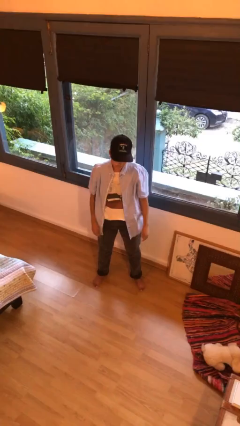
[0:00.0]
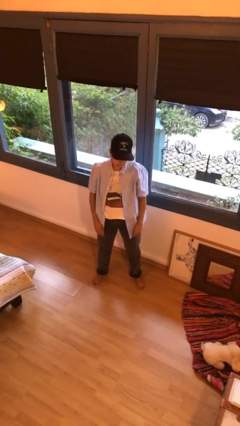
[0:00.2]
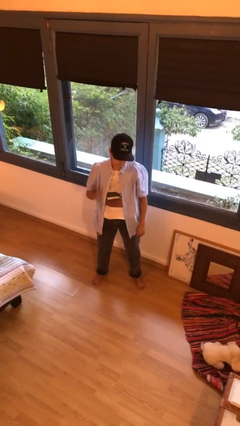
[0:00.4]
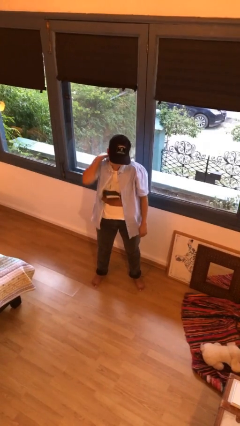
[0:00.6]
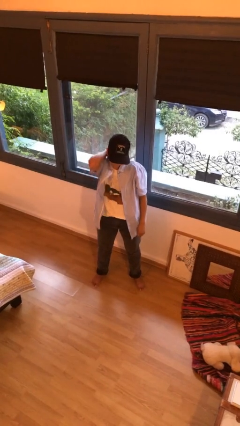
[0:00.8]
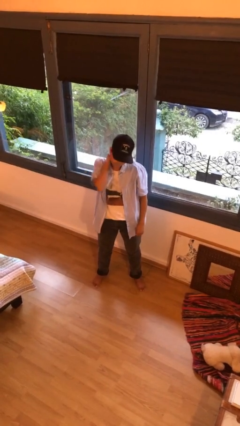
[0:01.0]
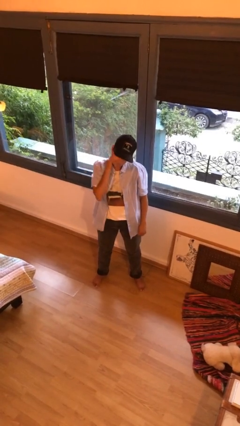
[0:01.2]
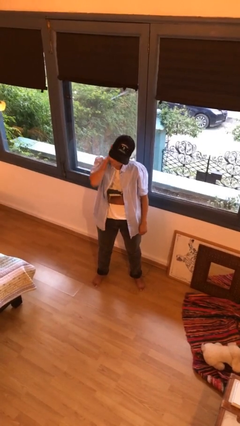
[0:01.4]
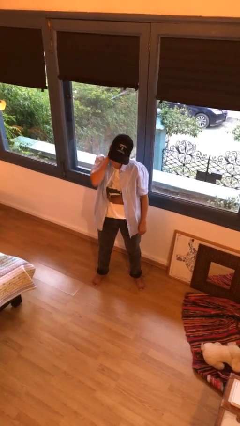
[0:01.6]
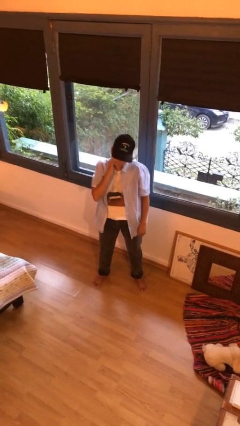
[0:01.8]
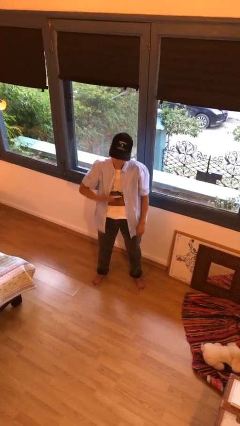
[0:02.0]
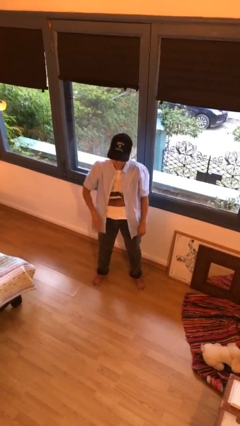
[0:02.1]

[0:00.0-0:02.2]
person rubs neck

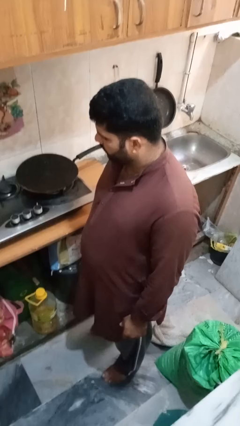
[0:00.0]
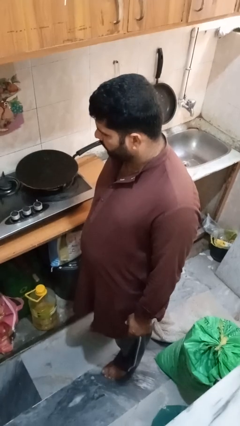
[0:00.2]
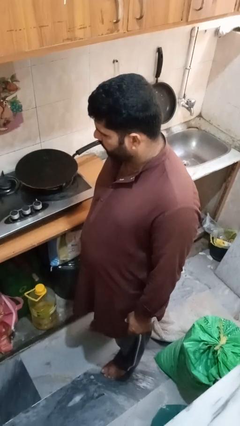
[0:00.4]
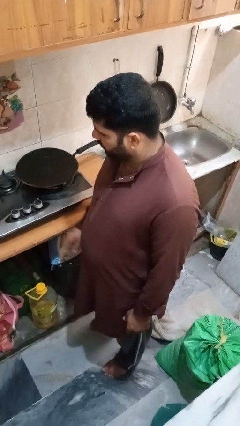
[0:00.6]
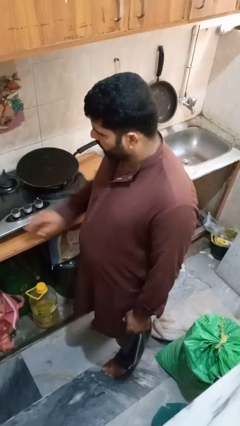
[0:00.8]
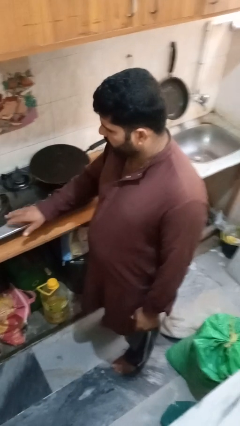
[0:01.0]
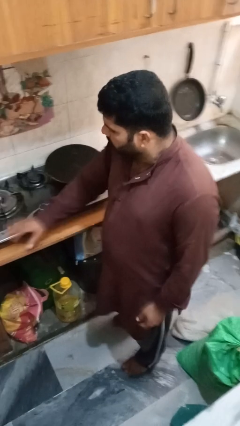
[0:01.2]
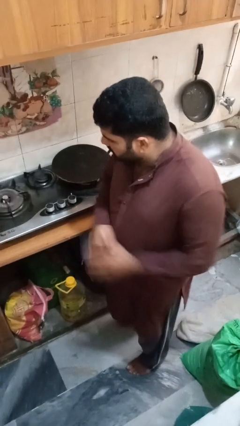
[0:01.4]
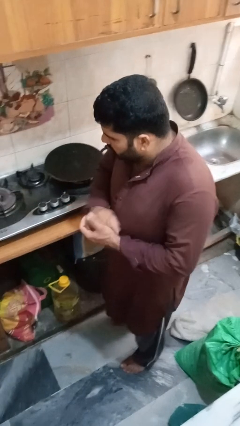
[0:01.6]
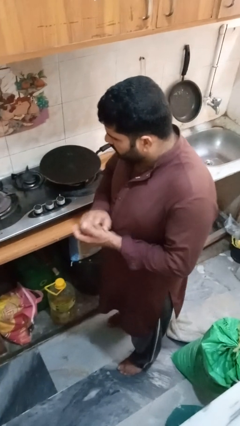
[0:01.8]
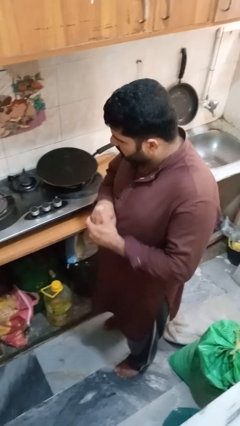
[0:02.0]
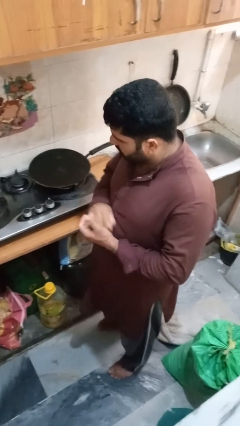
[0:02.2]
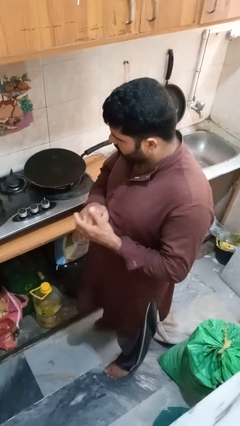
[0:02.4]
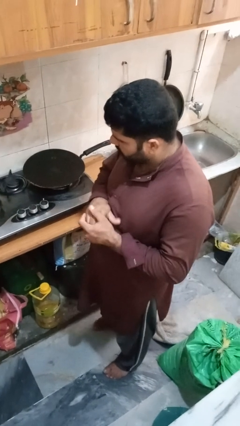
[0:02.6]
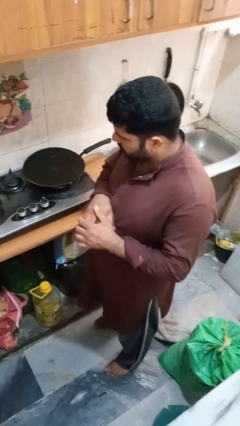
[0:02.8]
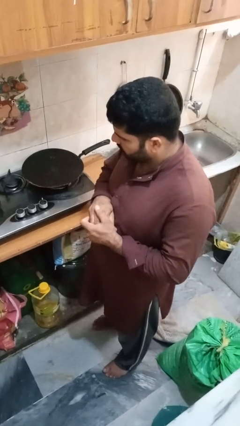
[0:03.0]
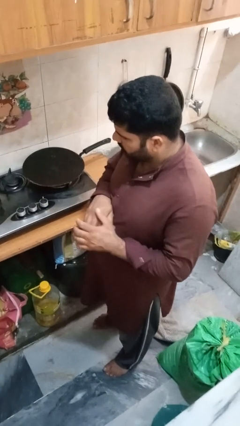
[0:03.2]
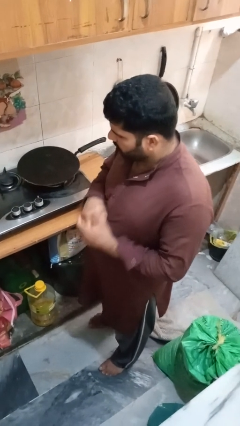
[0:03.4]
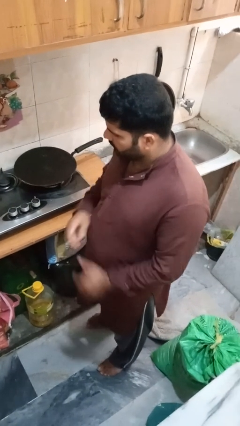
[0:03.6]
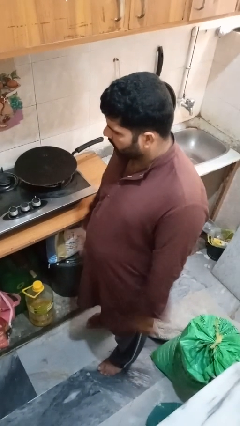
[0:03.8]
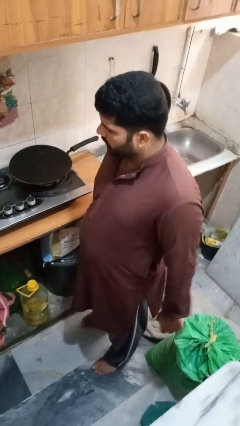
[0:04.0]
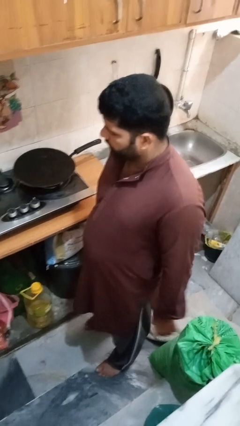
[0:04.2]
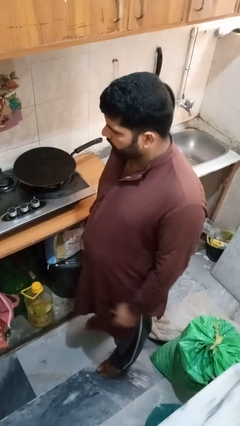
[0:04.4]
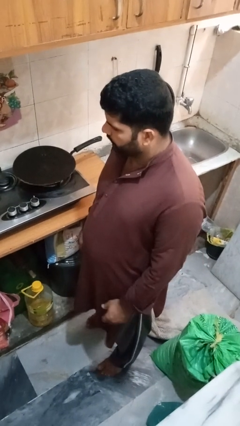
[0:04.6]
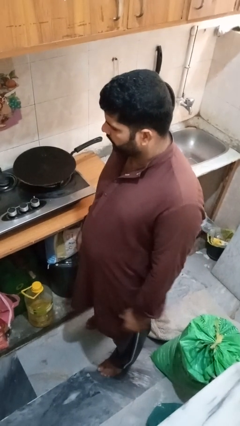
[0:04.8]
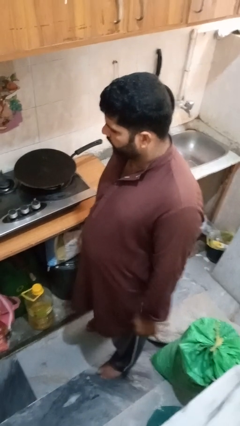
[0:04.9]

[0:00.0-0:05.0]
person burns hand

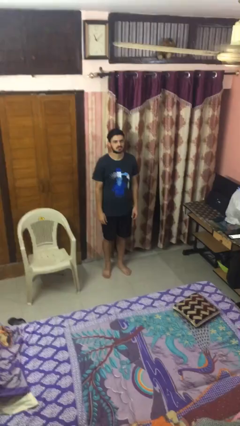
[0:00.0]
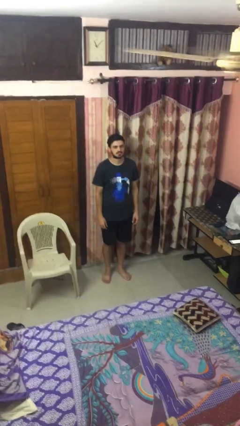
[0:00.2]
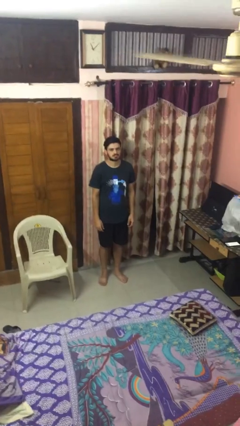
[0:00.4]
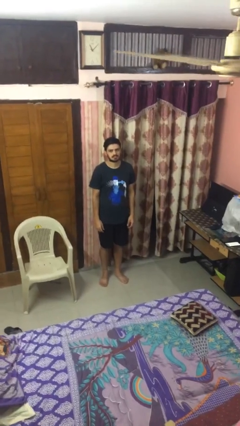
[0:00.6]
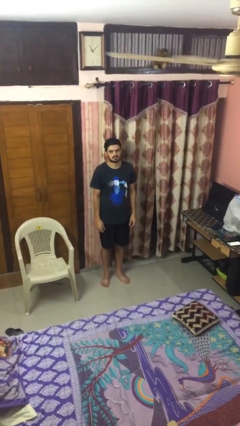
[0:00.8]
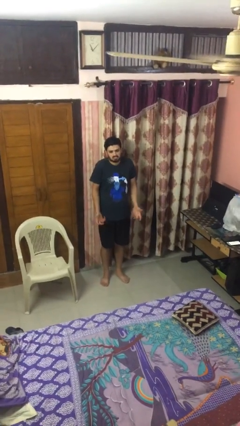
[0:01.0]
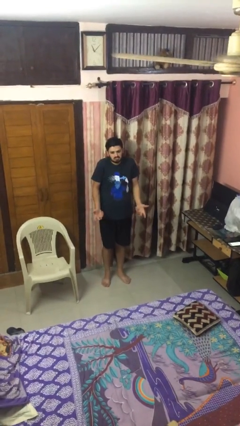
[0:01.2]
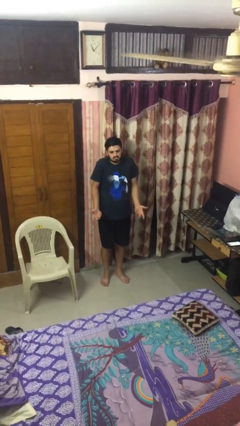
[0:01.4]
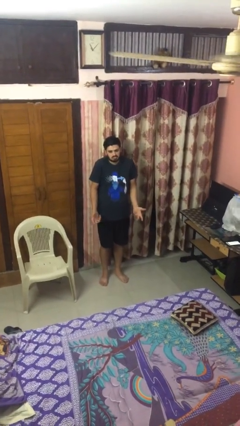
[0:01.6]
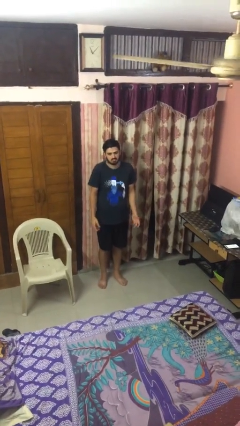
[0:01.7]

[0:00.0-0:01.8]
person shrugs

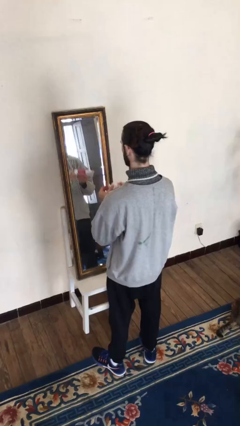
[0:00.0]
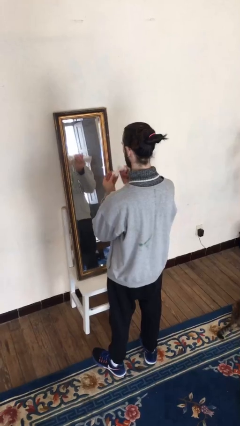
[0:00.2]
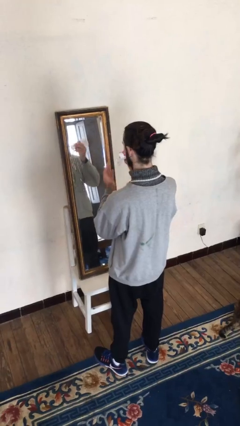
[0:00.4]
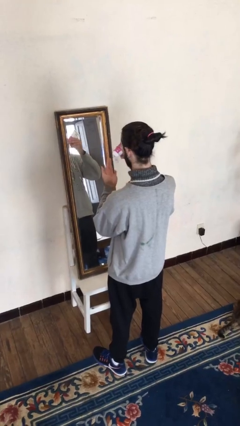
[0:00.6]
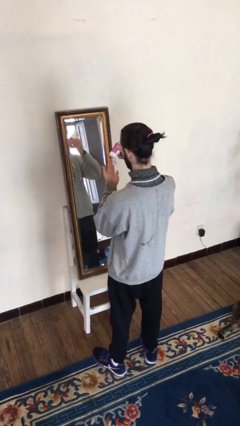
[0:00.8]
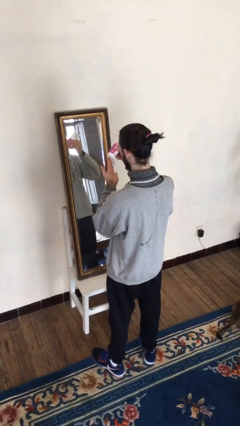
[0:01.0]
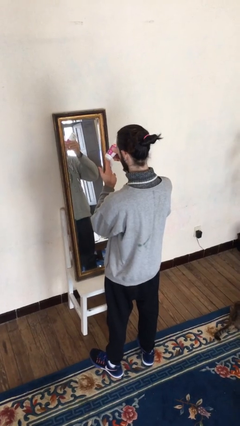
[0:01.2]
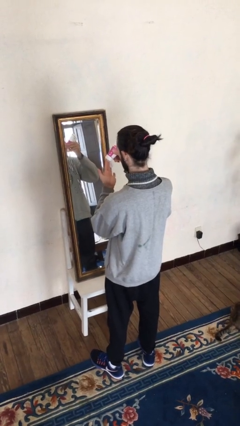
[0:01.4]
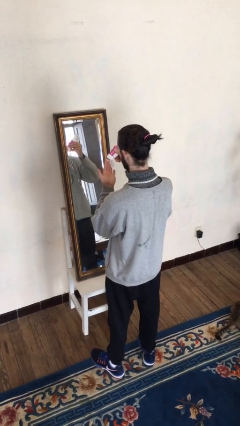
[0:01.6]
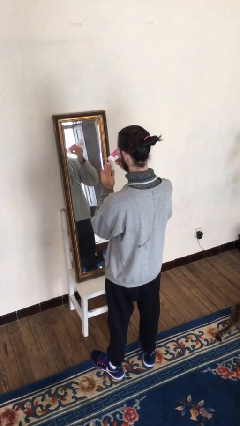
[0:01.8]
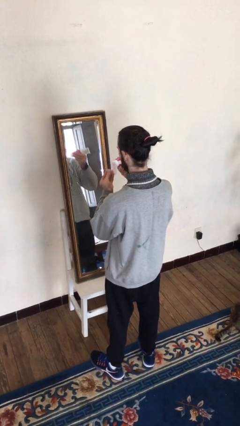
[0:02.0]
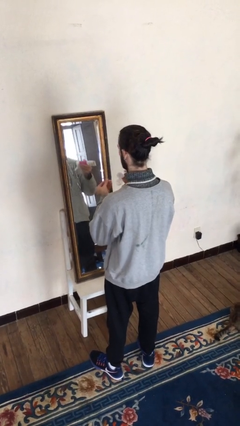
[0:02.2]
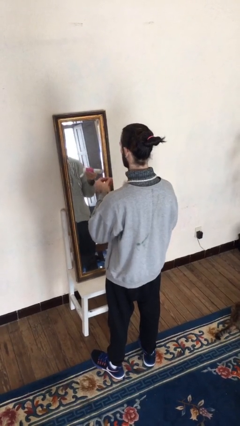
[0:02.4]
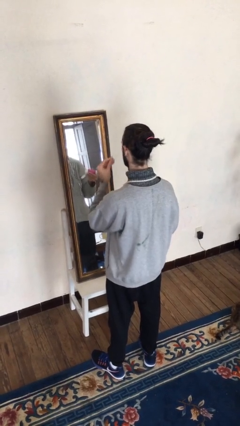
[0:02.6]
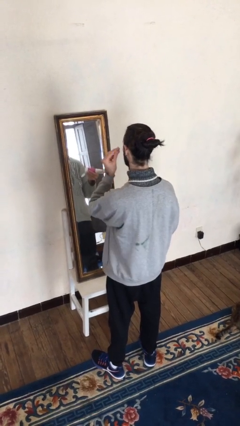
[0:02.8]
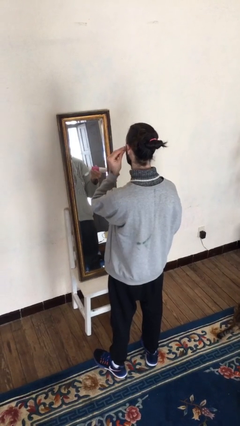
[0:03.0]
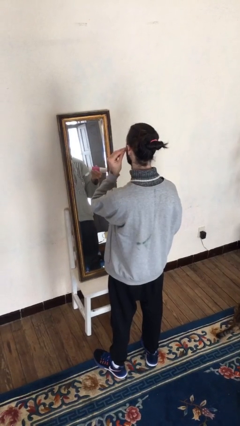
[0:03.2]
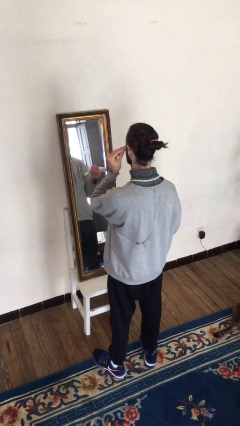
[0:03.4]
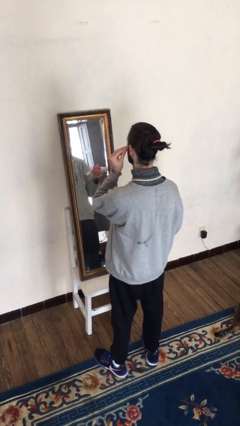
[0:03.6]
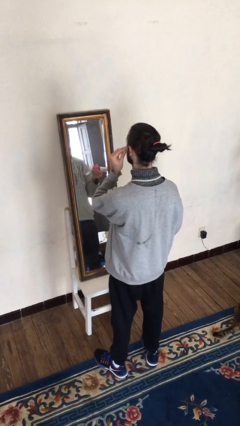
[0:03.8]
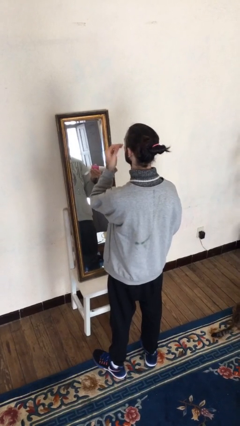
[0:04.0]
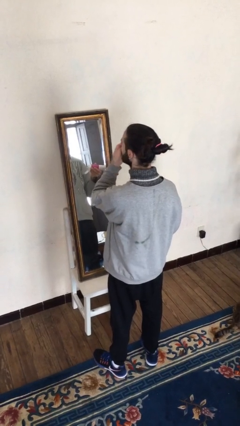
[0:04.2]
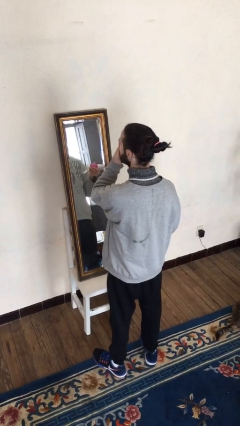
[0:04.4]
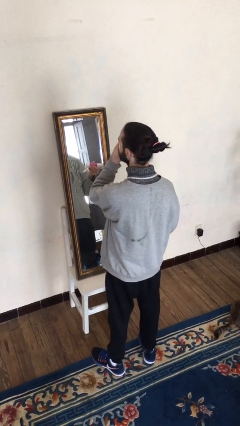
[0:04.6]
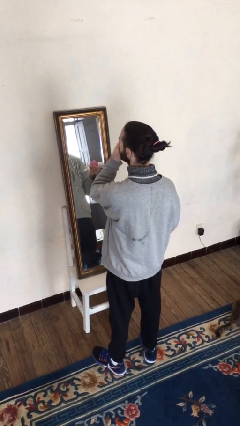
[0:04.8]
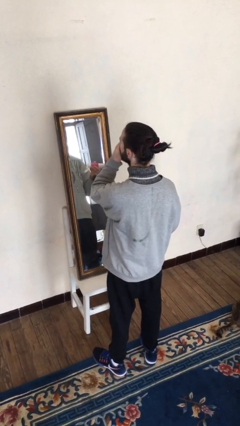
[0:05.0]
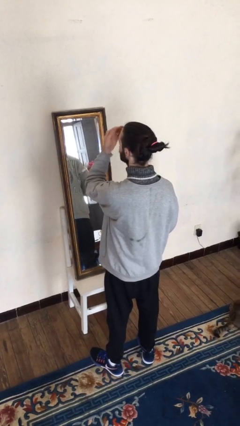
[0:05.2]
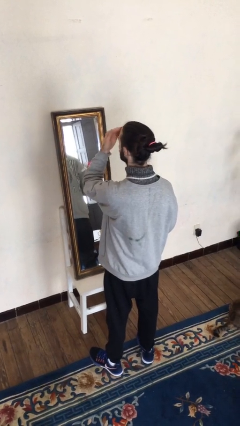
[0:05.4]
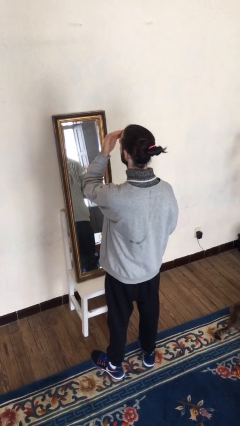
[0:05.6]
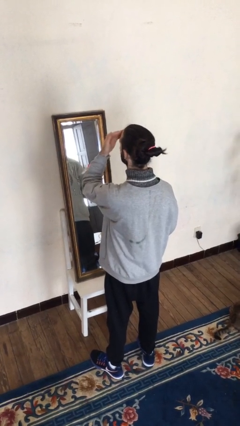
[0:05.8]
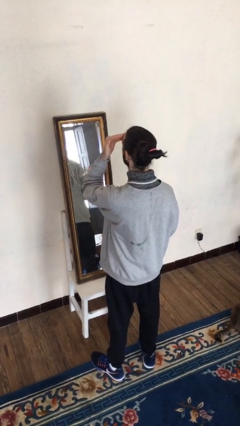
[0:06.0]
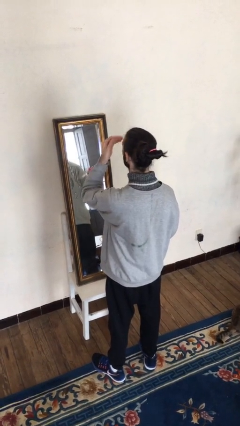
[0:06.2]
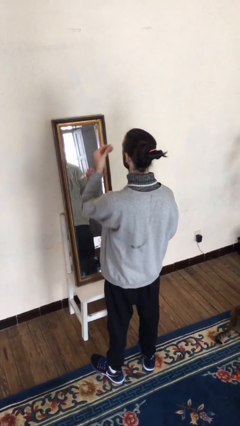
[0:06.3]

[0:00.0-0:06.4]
person applies facial moisturizer

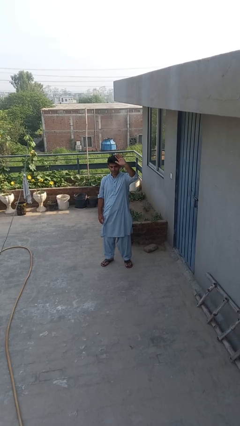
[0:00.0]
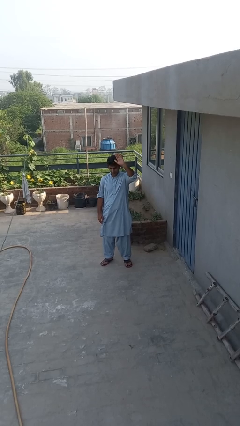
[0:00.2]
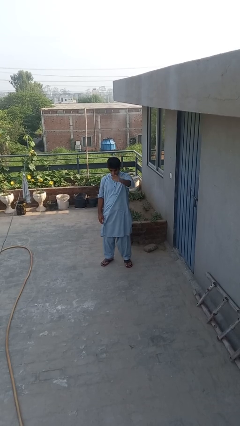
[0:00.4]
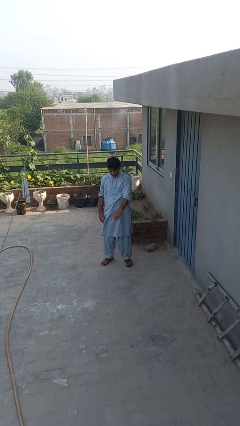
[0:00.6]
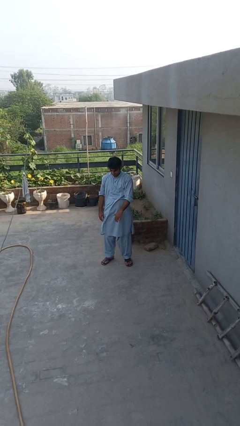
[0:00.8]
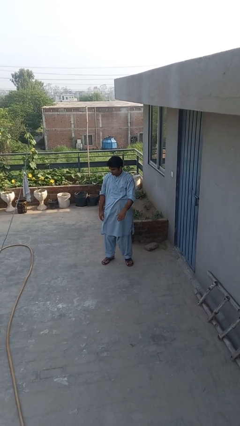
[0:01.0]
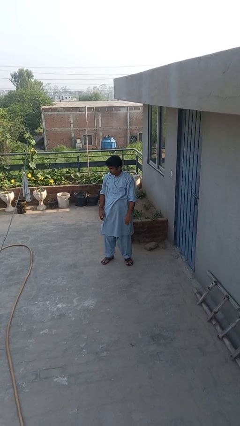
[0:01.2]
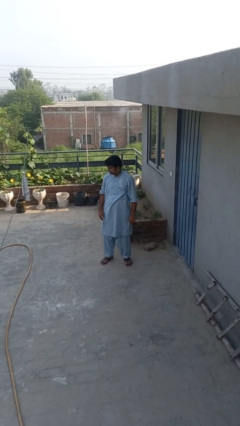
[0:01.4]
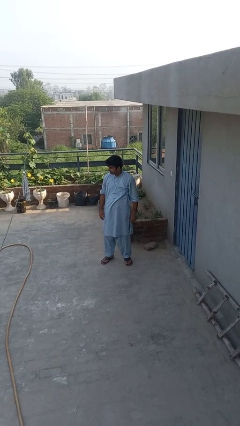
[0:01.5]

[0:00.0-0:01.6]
person gestures swipe down

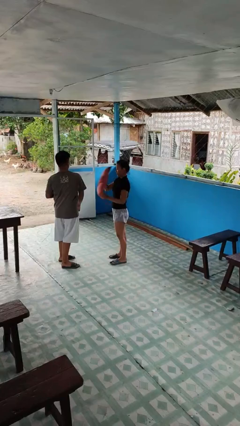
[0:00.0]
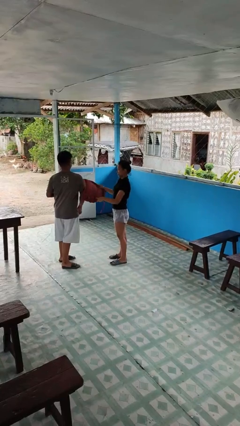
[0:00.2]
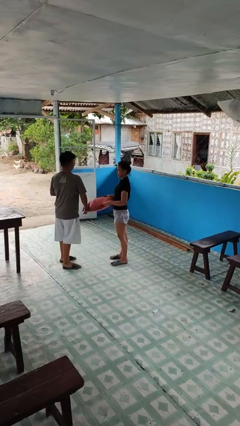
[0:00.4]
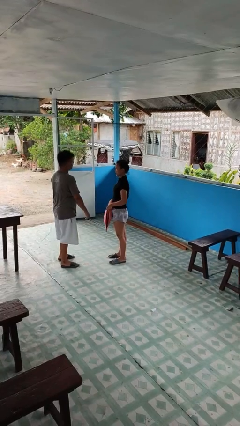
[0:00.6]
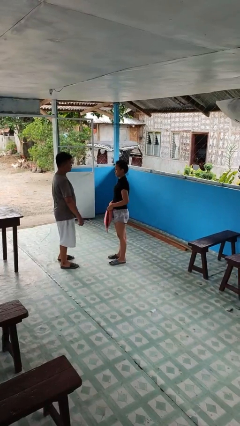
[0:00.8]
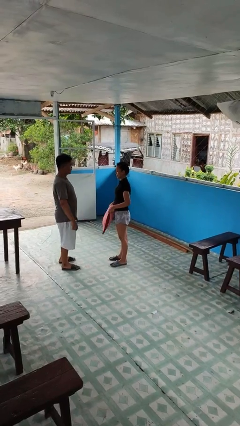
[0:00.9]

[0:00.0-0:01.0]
person hits person with pillow
